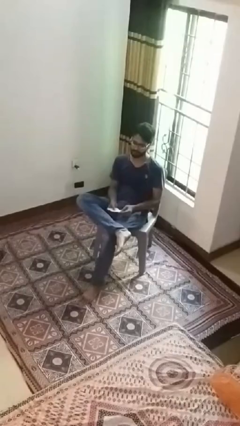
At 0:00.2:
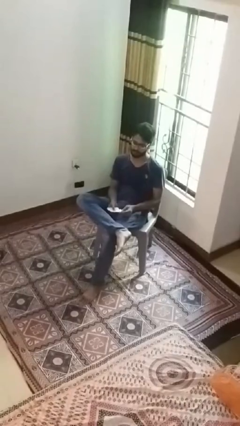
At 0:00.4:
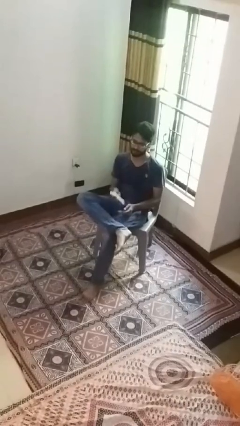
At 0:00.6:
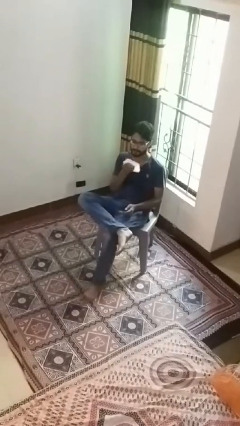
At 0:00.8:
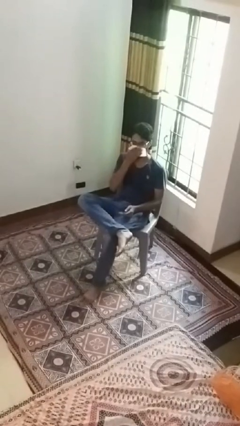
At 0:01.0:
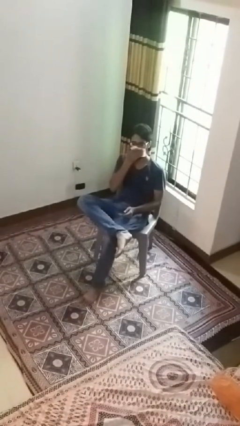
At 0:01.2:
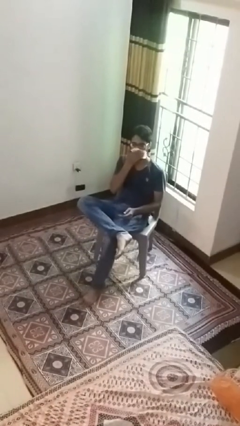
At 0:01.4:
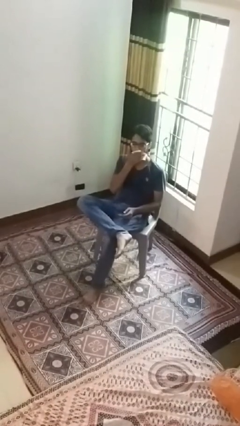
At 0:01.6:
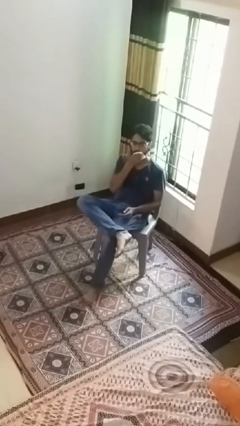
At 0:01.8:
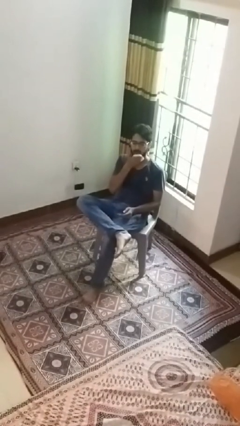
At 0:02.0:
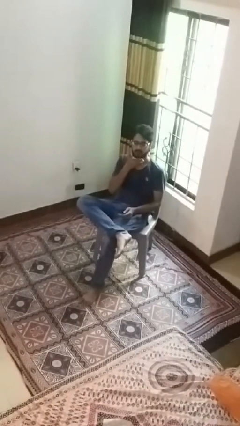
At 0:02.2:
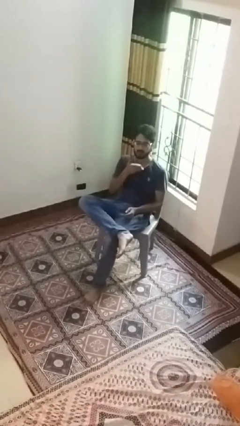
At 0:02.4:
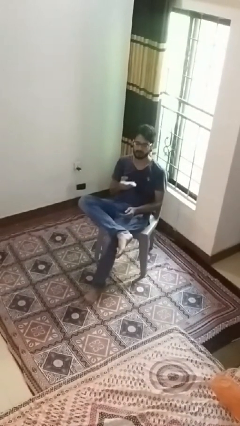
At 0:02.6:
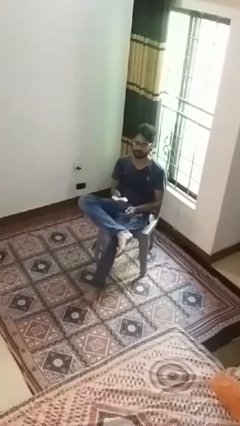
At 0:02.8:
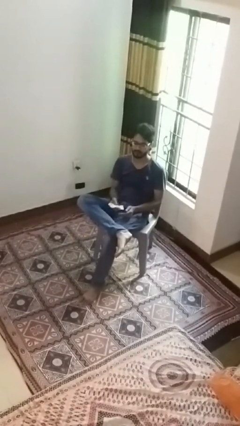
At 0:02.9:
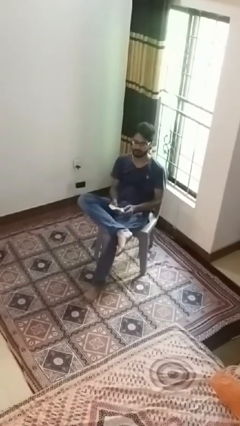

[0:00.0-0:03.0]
person wipes mouth with napkin

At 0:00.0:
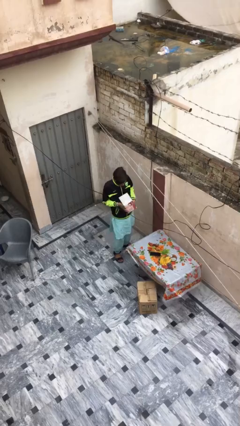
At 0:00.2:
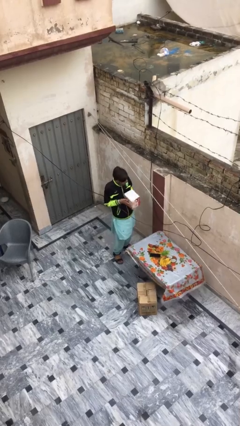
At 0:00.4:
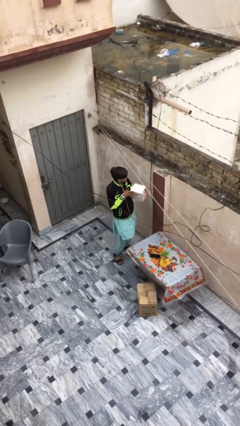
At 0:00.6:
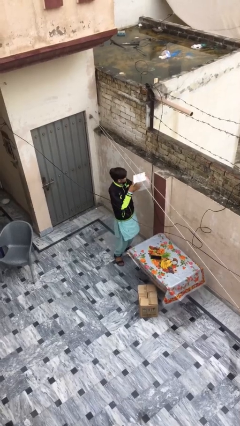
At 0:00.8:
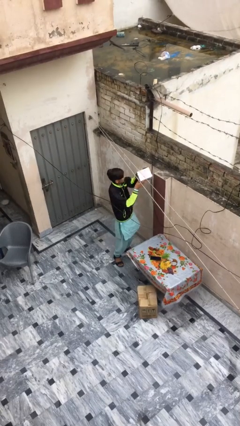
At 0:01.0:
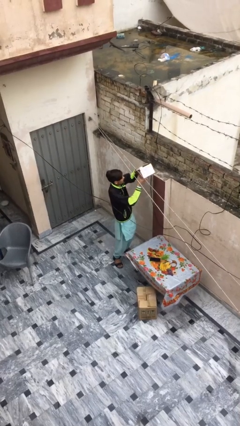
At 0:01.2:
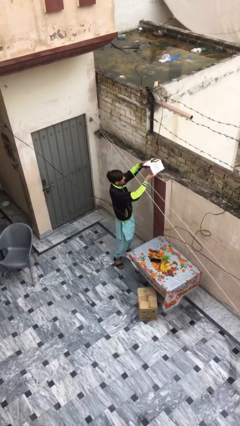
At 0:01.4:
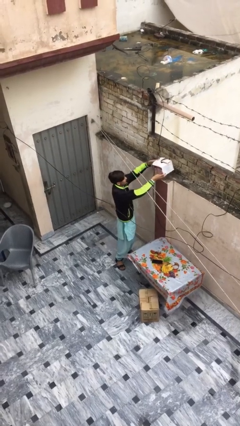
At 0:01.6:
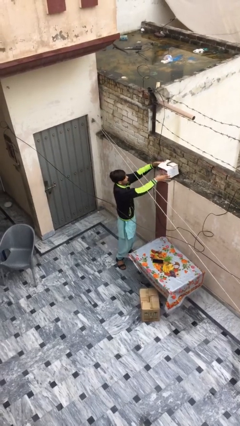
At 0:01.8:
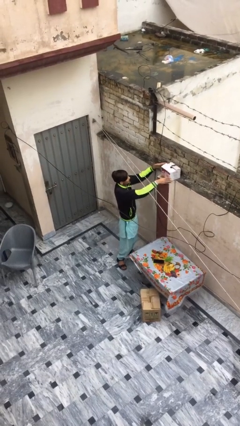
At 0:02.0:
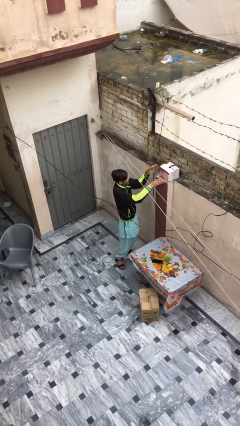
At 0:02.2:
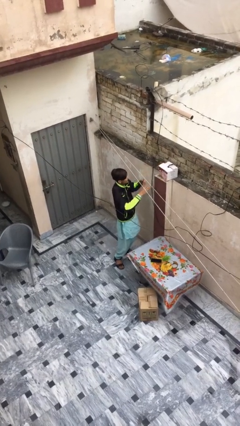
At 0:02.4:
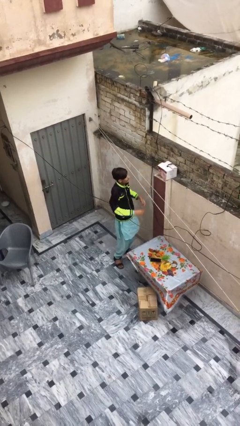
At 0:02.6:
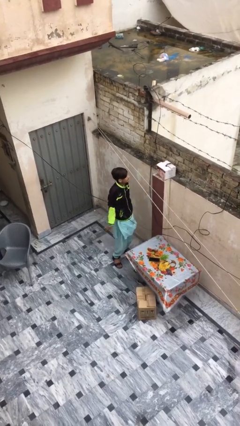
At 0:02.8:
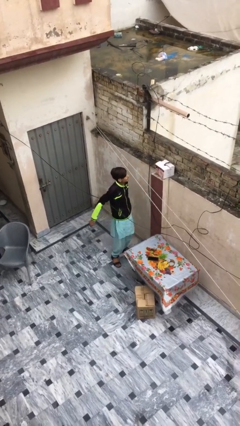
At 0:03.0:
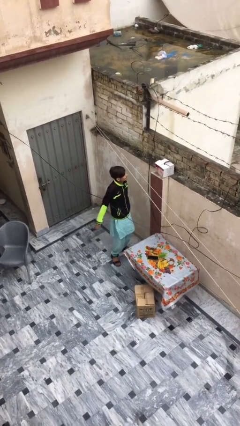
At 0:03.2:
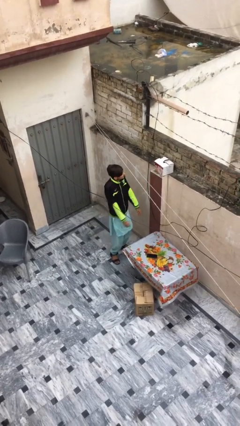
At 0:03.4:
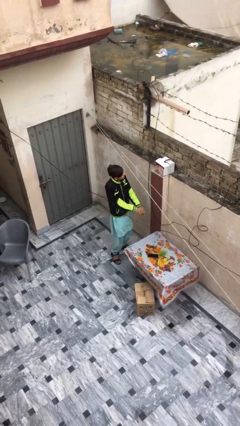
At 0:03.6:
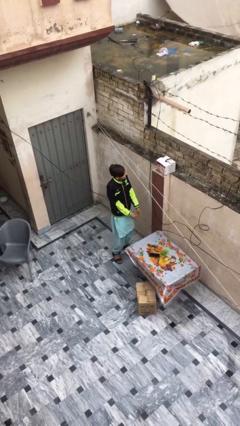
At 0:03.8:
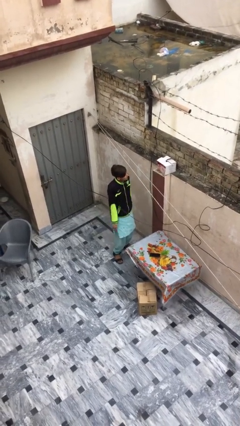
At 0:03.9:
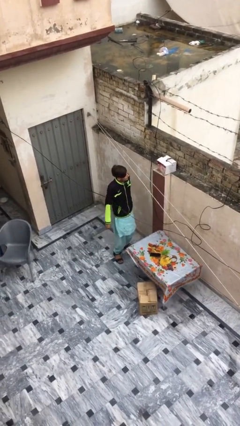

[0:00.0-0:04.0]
person puts down object on shelf

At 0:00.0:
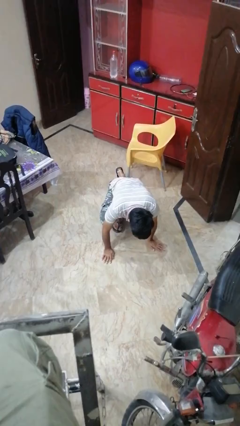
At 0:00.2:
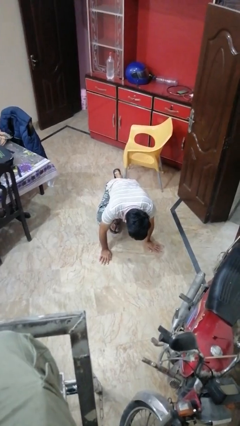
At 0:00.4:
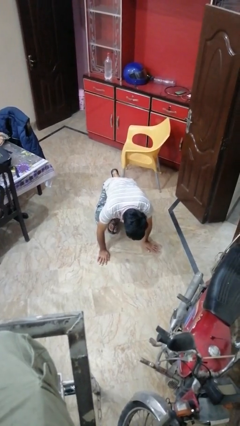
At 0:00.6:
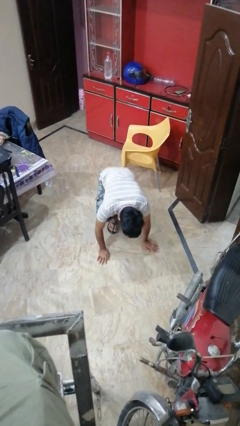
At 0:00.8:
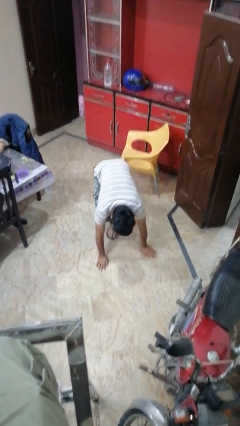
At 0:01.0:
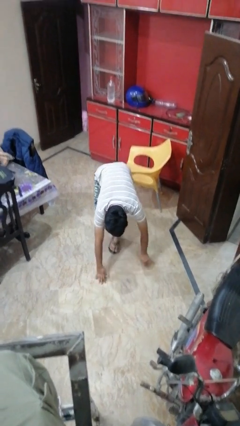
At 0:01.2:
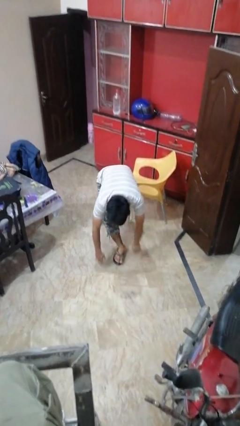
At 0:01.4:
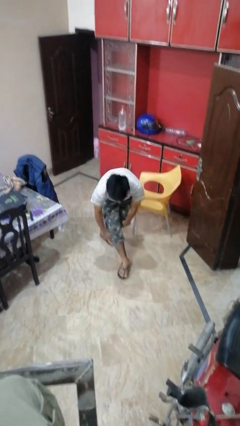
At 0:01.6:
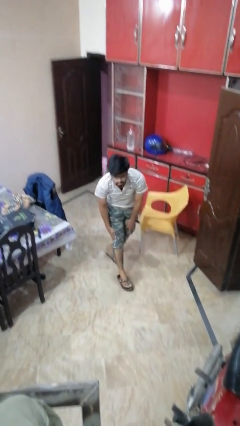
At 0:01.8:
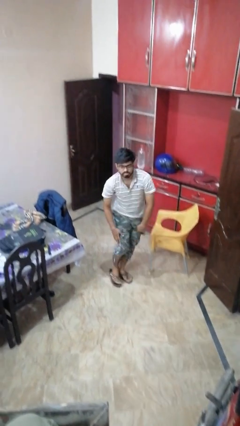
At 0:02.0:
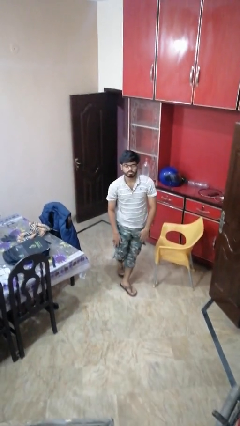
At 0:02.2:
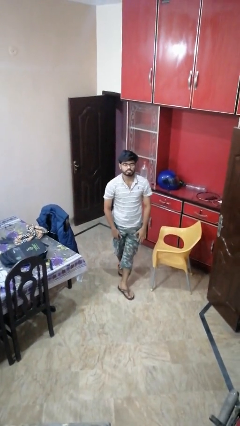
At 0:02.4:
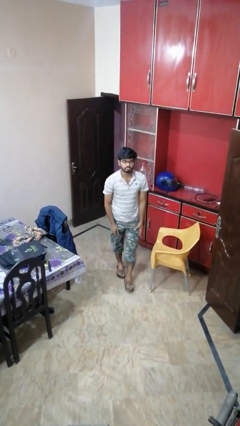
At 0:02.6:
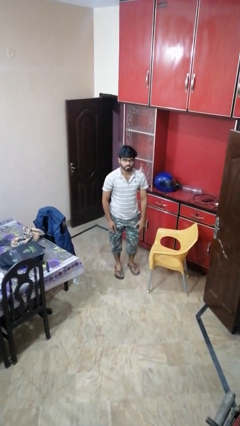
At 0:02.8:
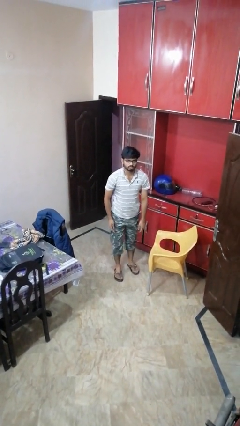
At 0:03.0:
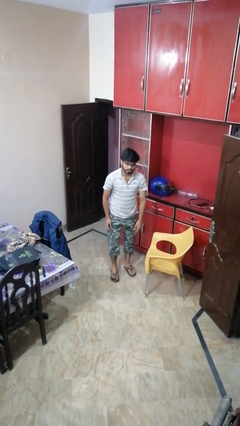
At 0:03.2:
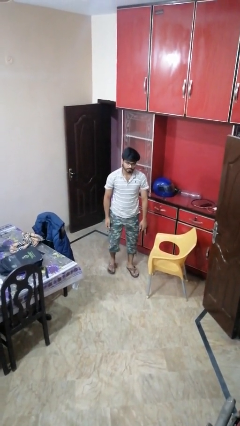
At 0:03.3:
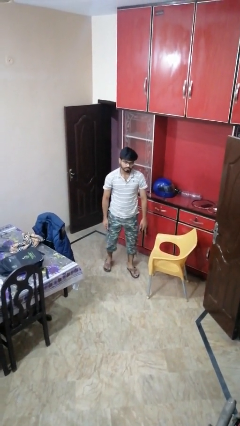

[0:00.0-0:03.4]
person stands up from floor

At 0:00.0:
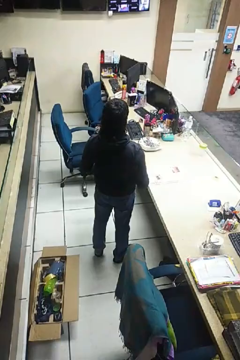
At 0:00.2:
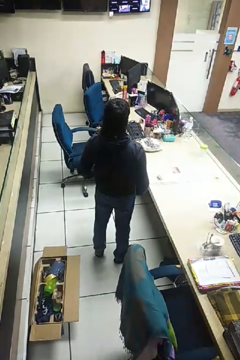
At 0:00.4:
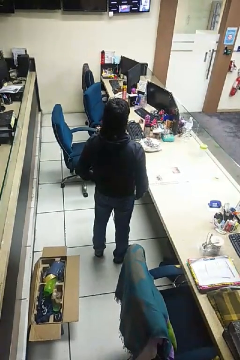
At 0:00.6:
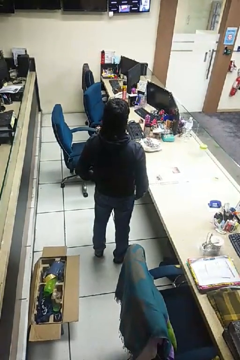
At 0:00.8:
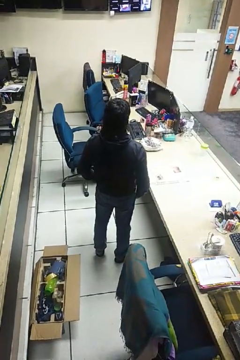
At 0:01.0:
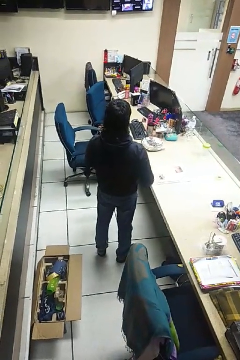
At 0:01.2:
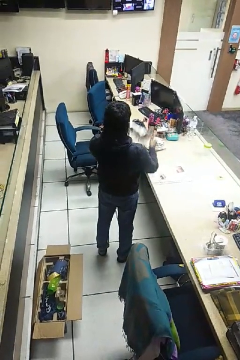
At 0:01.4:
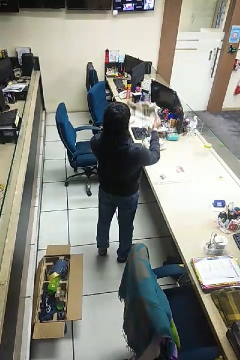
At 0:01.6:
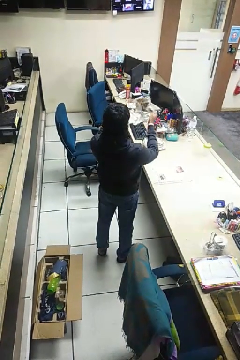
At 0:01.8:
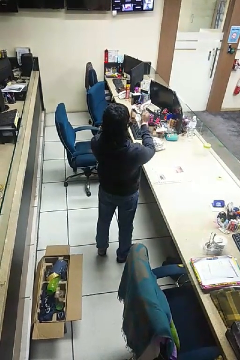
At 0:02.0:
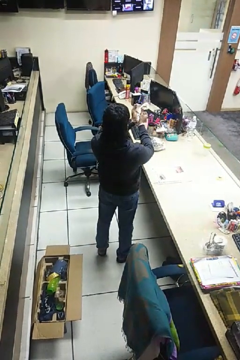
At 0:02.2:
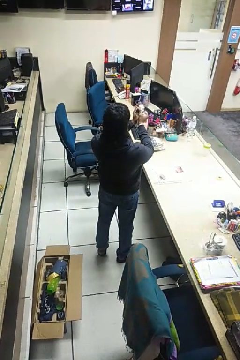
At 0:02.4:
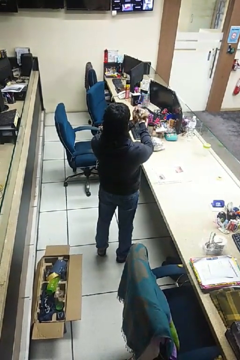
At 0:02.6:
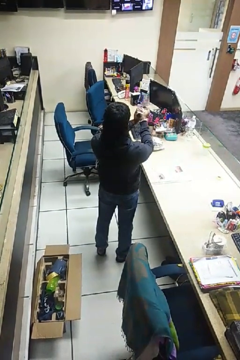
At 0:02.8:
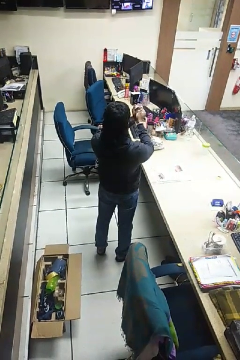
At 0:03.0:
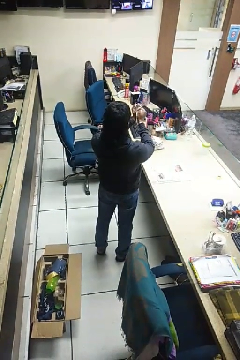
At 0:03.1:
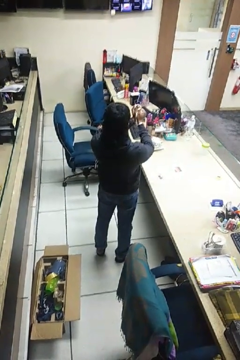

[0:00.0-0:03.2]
person crumples paper

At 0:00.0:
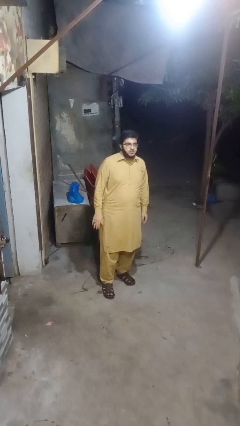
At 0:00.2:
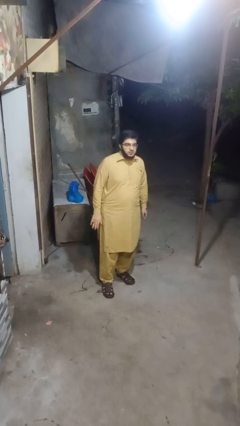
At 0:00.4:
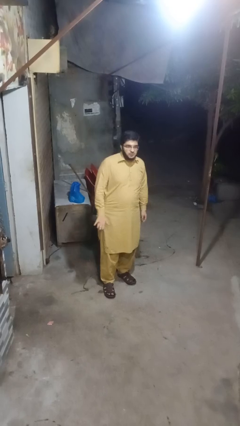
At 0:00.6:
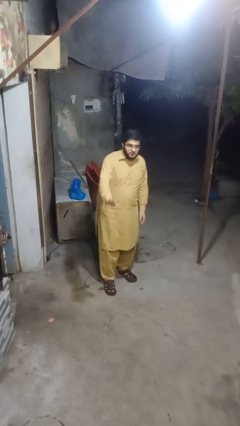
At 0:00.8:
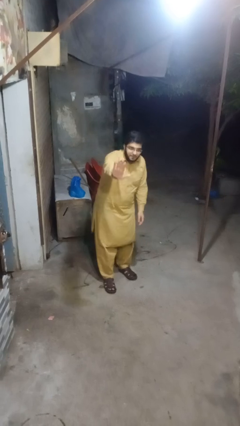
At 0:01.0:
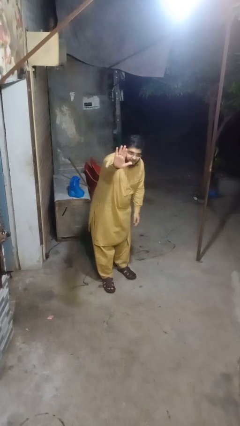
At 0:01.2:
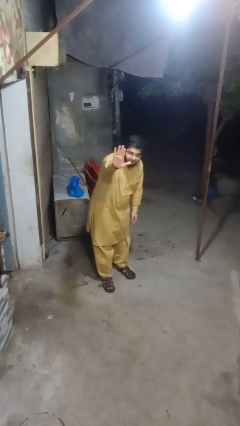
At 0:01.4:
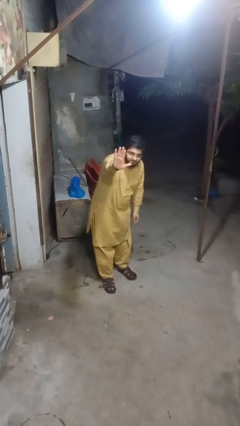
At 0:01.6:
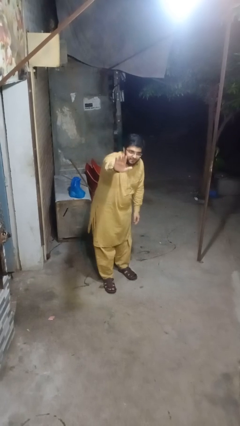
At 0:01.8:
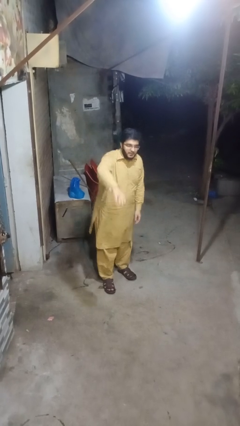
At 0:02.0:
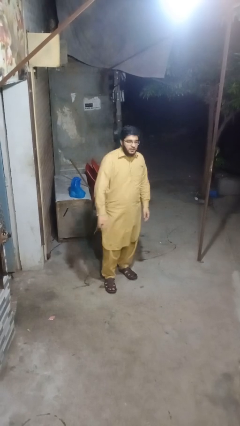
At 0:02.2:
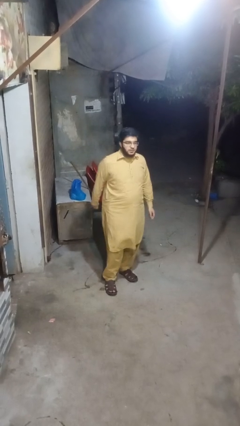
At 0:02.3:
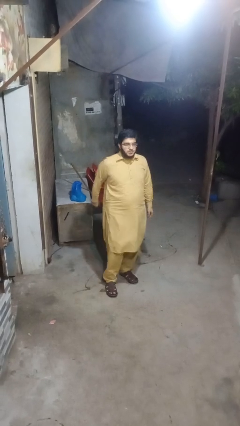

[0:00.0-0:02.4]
person gestures stop

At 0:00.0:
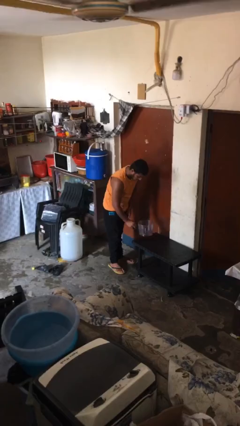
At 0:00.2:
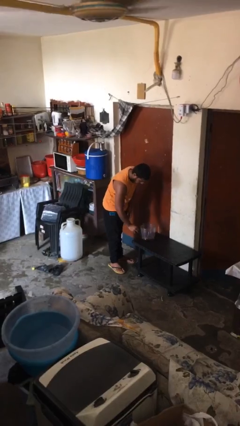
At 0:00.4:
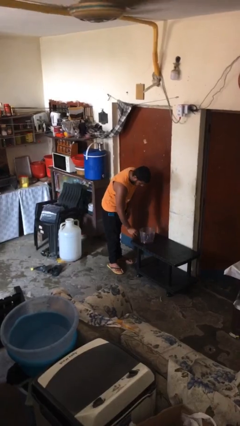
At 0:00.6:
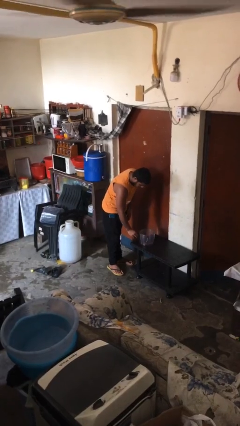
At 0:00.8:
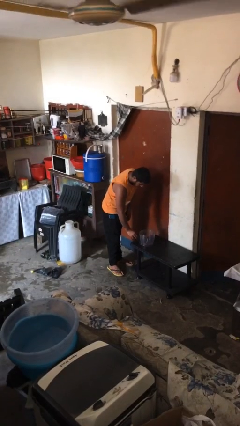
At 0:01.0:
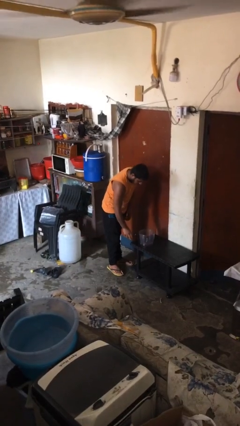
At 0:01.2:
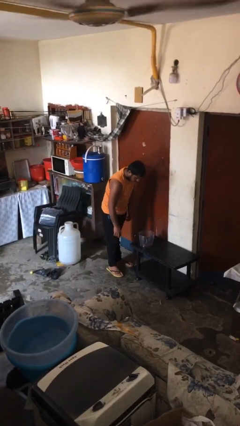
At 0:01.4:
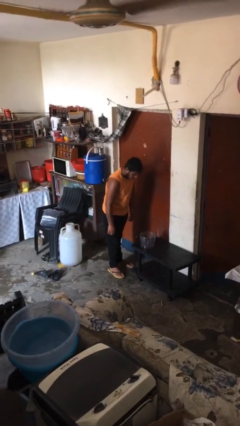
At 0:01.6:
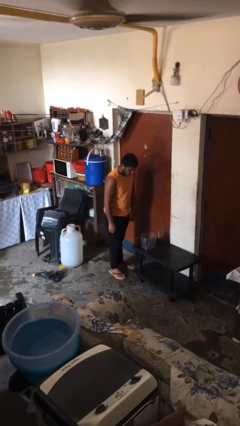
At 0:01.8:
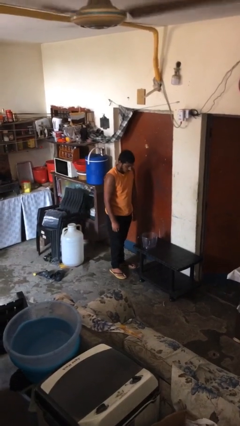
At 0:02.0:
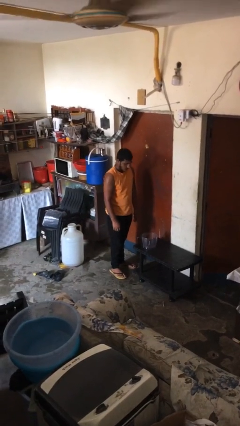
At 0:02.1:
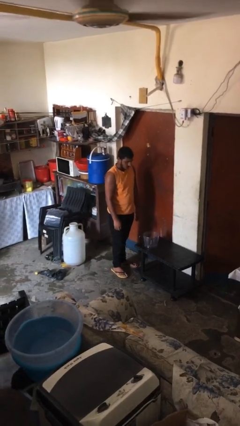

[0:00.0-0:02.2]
person puts down object on table
